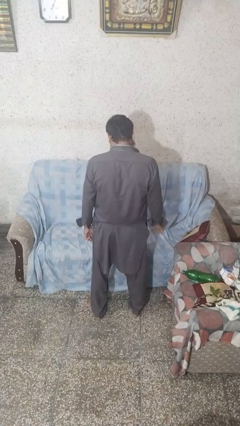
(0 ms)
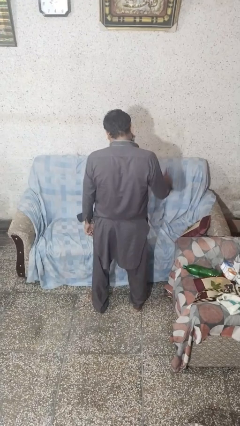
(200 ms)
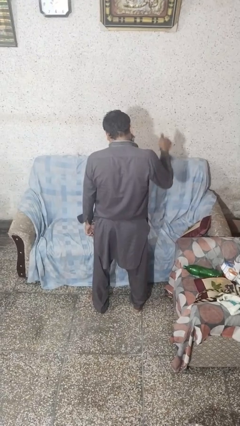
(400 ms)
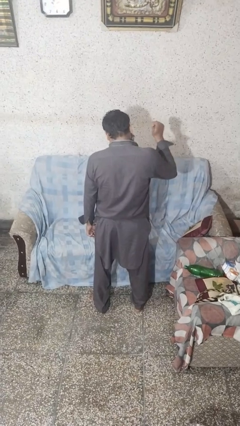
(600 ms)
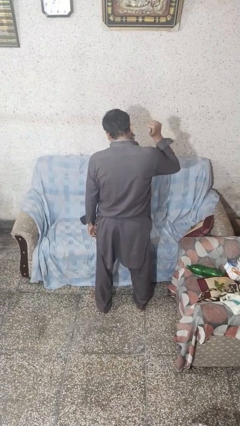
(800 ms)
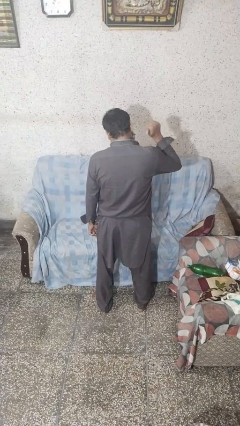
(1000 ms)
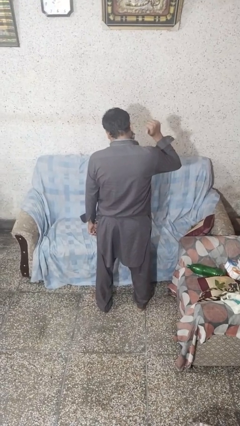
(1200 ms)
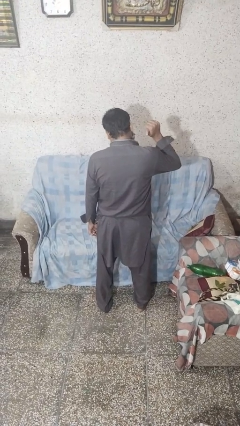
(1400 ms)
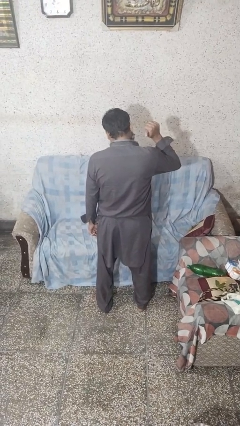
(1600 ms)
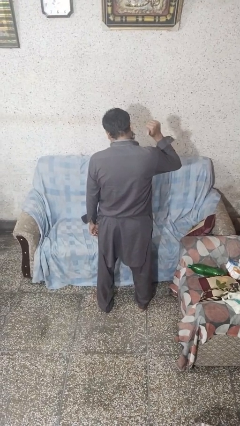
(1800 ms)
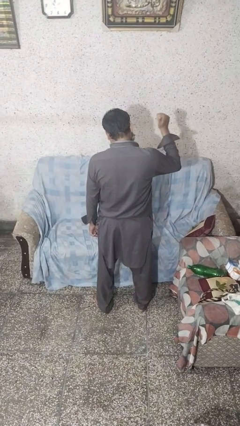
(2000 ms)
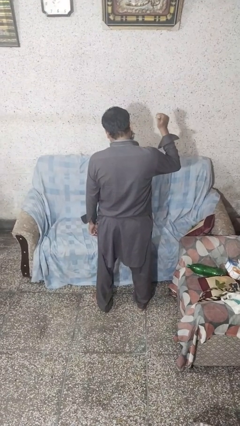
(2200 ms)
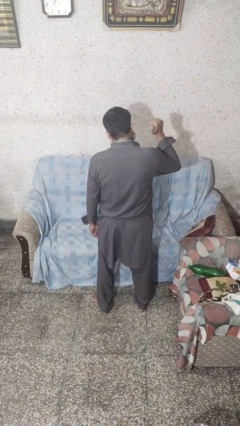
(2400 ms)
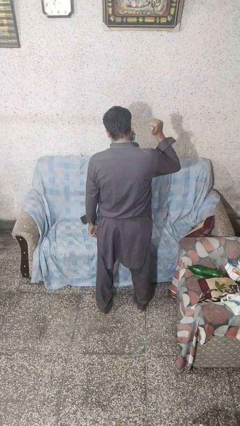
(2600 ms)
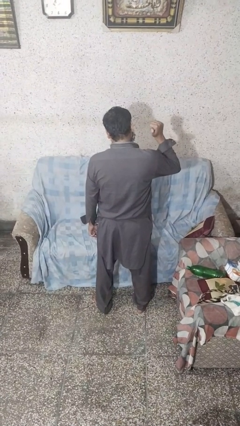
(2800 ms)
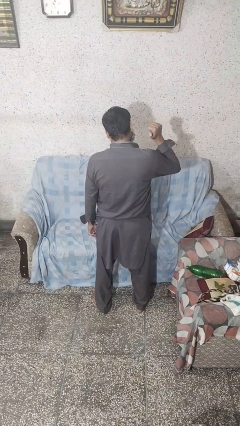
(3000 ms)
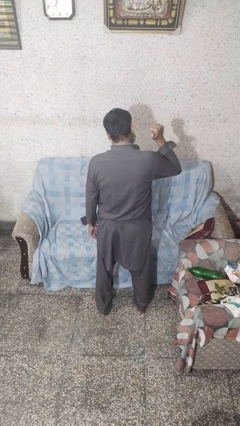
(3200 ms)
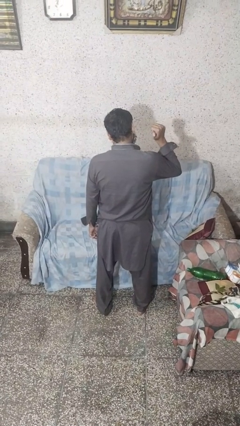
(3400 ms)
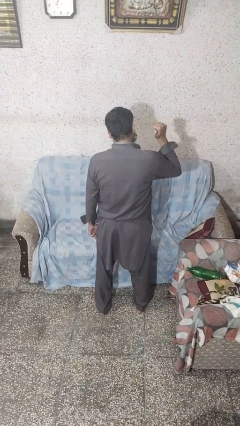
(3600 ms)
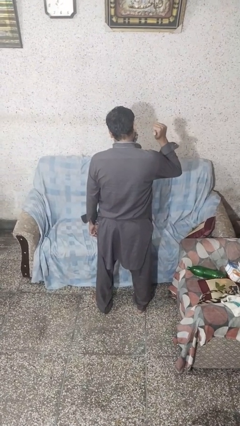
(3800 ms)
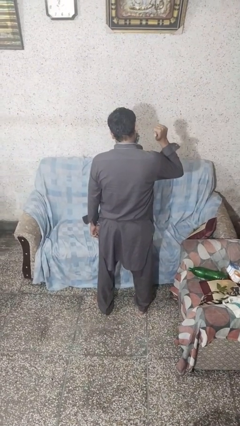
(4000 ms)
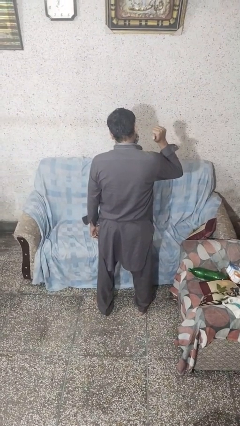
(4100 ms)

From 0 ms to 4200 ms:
person gestures behind me

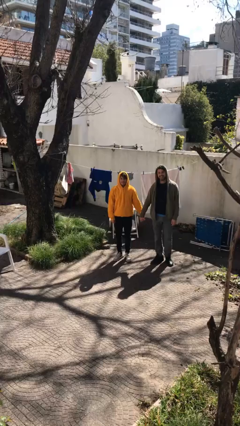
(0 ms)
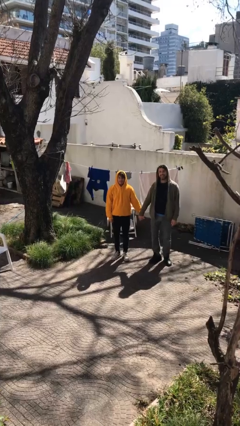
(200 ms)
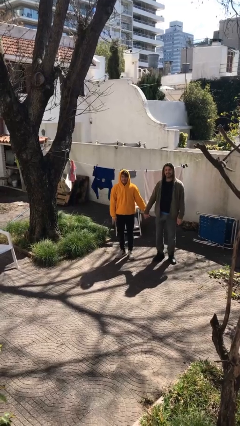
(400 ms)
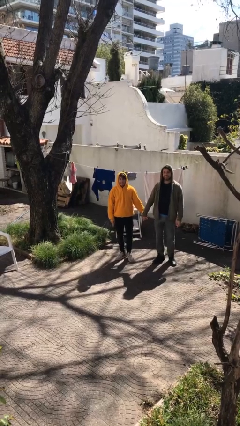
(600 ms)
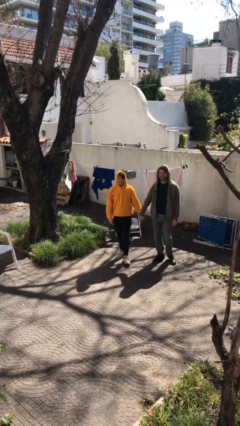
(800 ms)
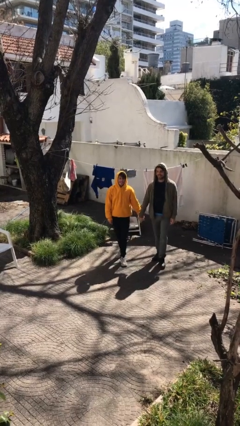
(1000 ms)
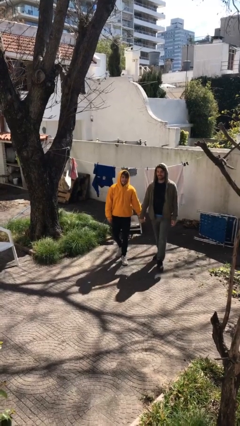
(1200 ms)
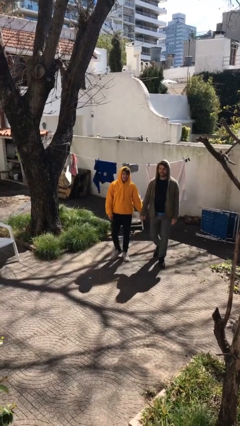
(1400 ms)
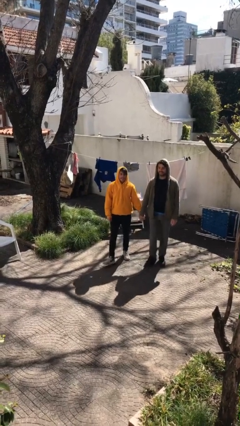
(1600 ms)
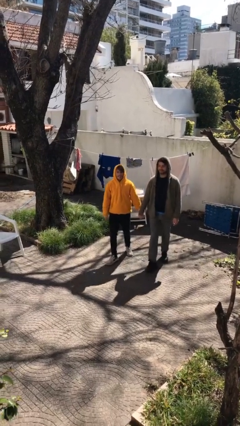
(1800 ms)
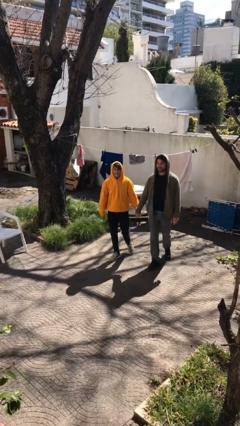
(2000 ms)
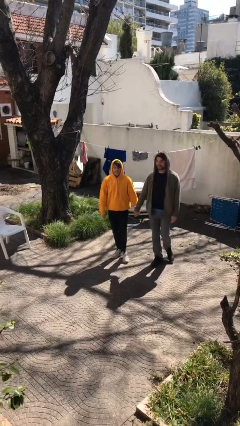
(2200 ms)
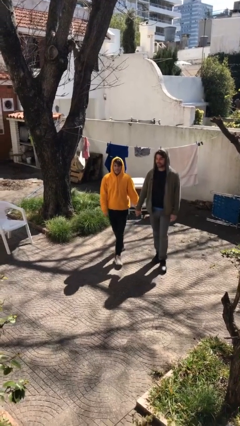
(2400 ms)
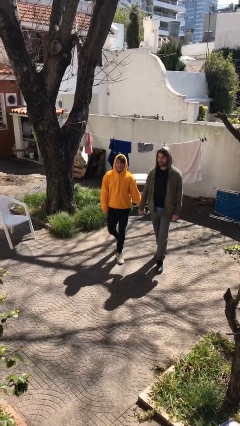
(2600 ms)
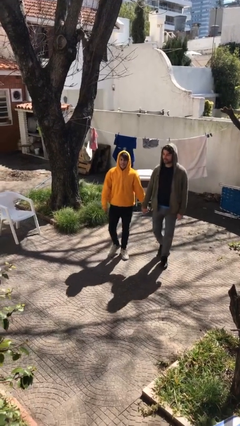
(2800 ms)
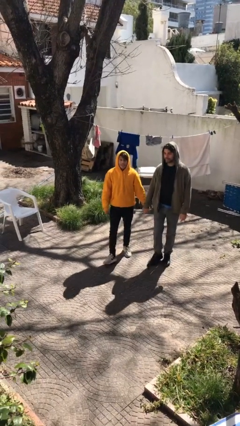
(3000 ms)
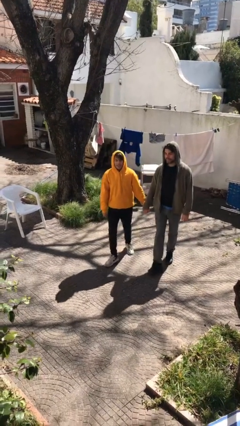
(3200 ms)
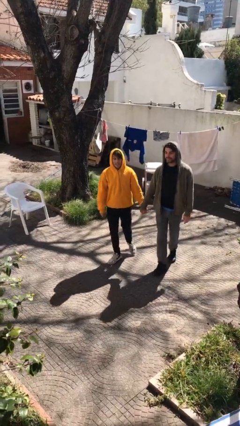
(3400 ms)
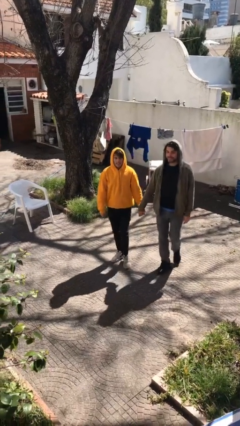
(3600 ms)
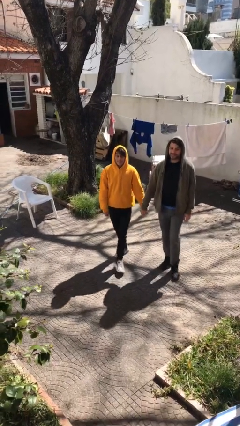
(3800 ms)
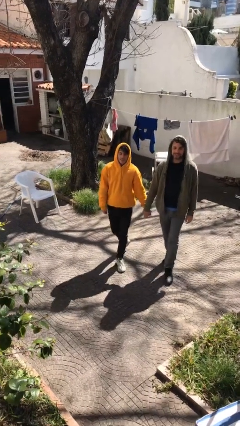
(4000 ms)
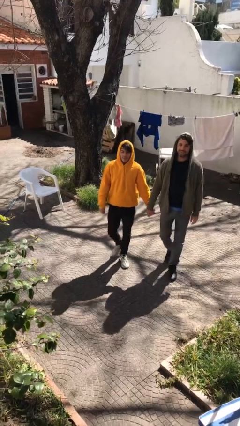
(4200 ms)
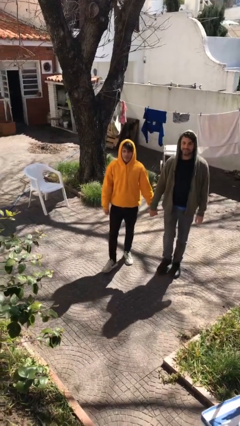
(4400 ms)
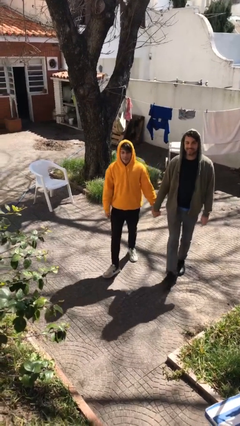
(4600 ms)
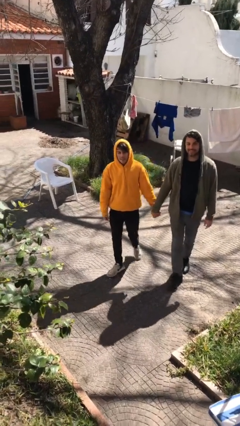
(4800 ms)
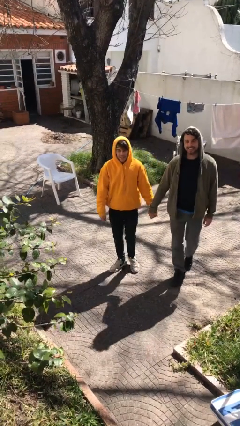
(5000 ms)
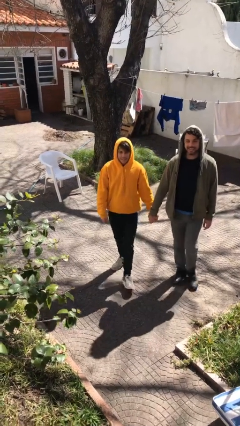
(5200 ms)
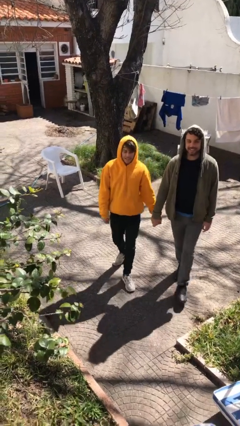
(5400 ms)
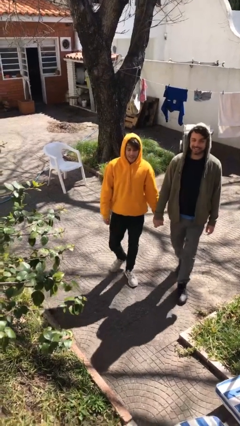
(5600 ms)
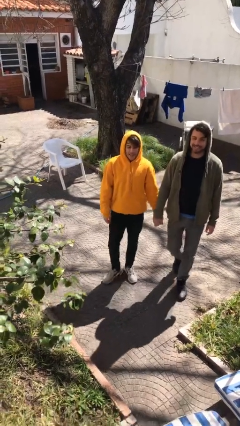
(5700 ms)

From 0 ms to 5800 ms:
person holds hand

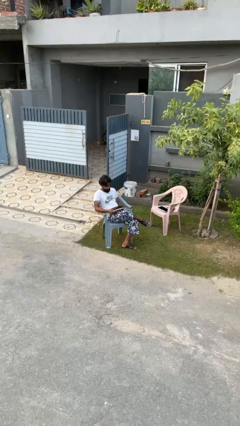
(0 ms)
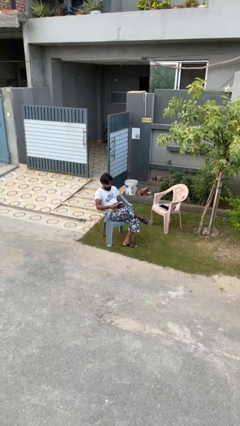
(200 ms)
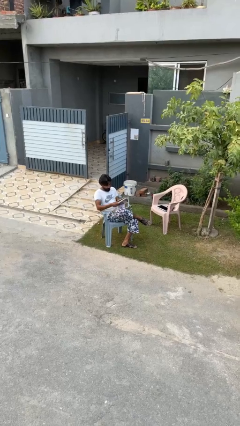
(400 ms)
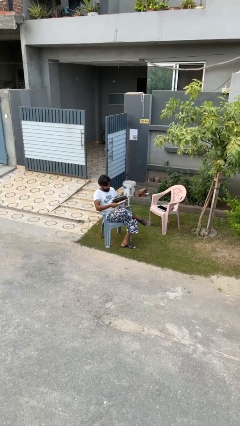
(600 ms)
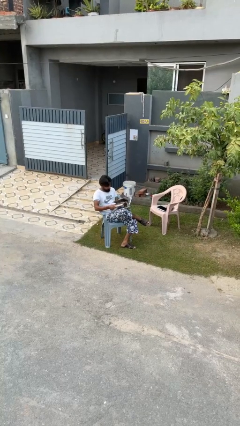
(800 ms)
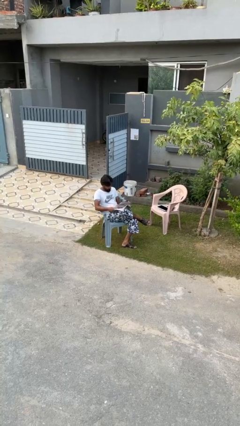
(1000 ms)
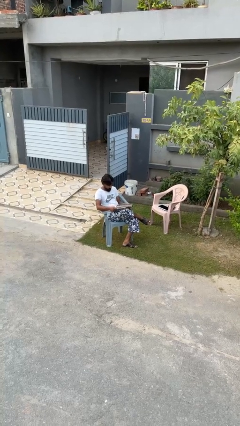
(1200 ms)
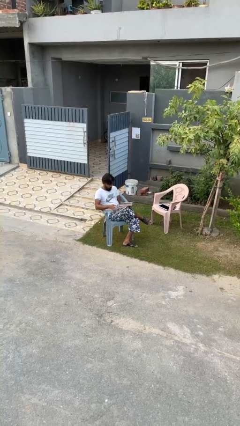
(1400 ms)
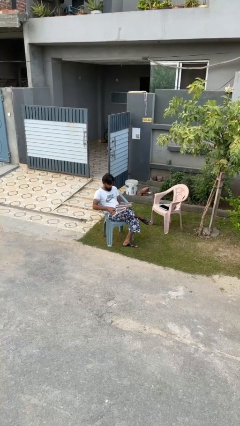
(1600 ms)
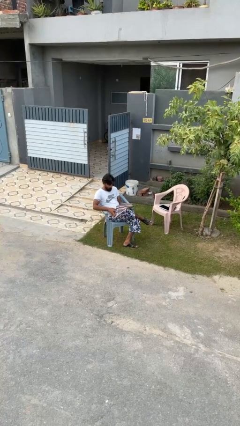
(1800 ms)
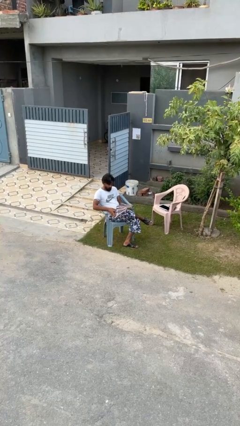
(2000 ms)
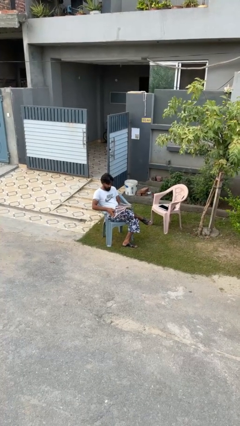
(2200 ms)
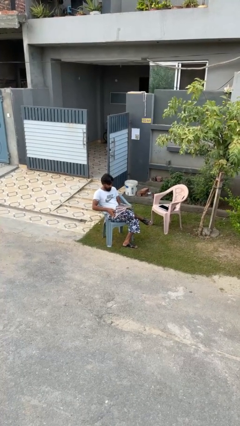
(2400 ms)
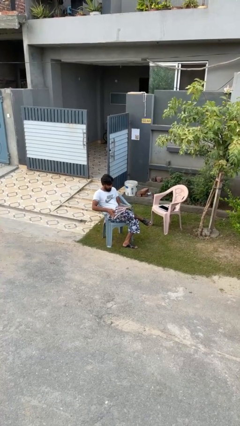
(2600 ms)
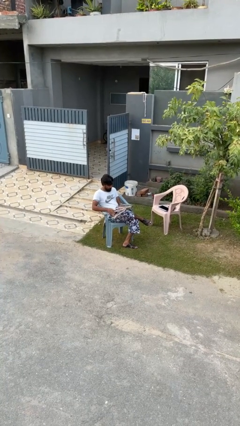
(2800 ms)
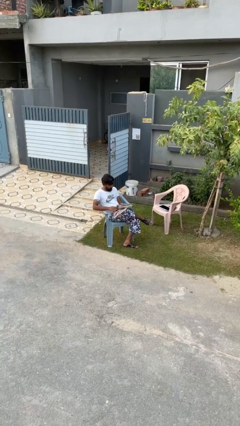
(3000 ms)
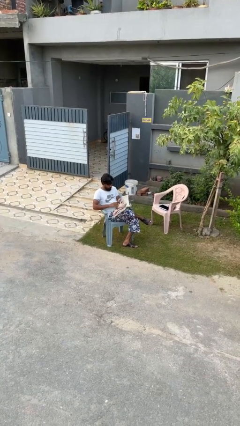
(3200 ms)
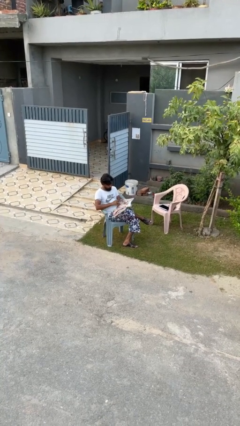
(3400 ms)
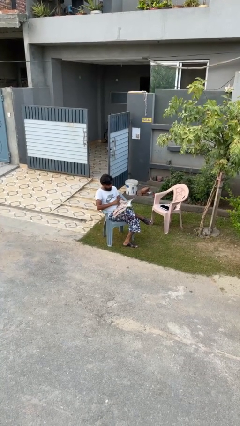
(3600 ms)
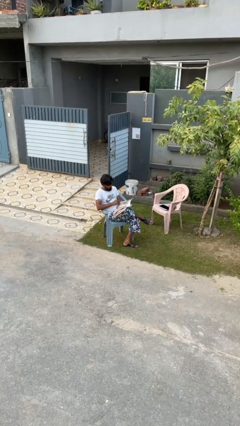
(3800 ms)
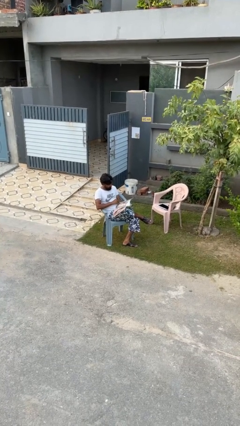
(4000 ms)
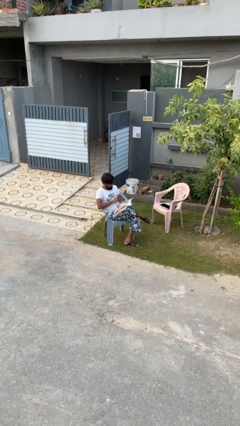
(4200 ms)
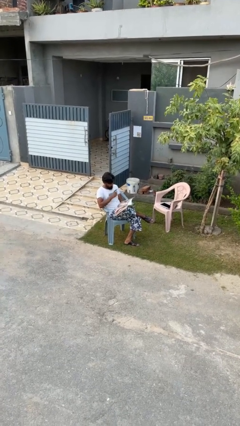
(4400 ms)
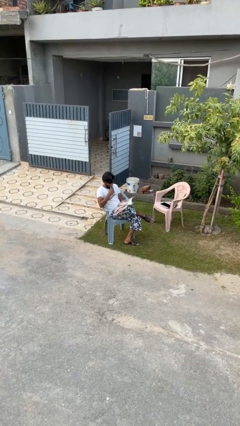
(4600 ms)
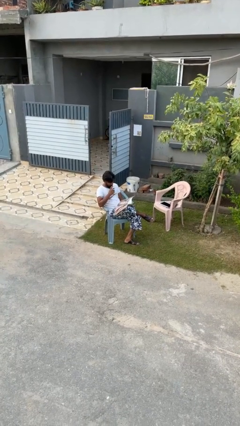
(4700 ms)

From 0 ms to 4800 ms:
person reads magazine

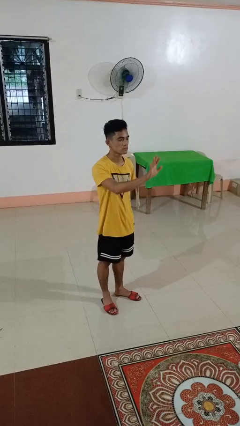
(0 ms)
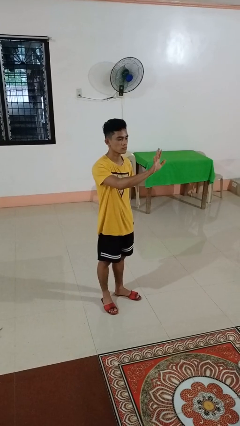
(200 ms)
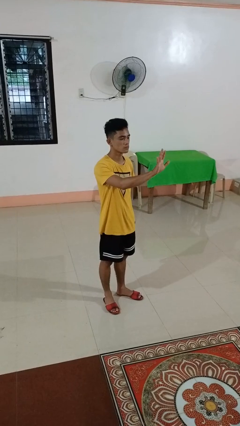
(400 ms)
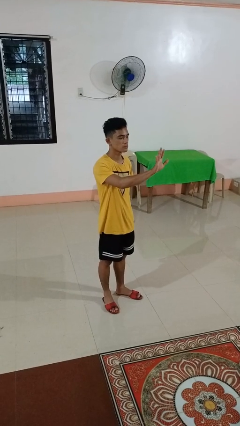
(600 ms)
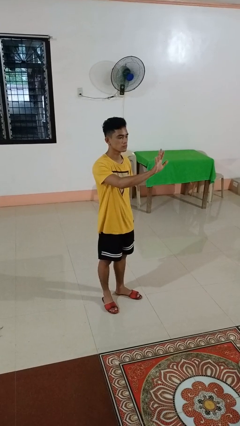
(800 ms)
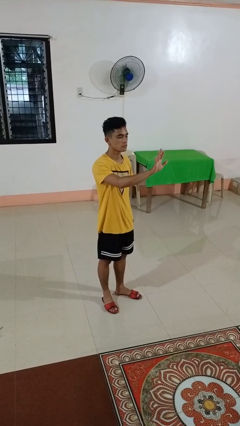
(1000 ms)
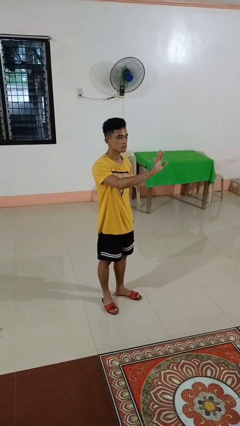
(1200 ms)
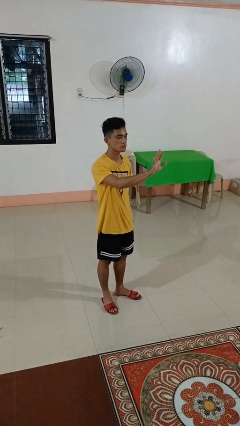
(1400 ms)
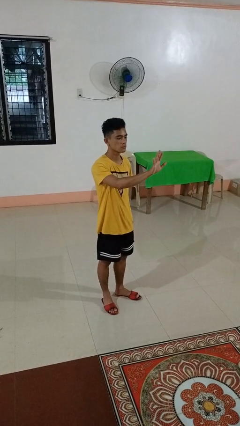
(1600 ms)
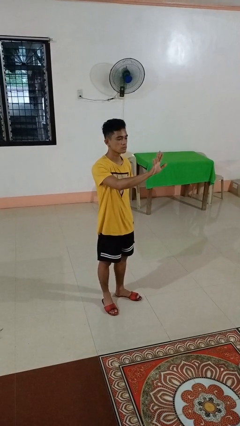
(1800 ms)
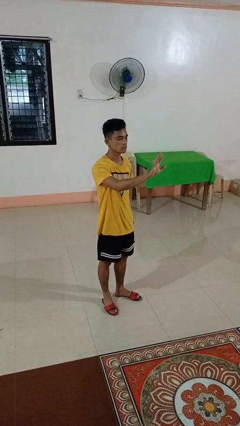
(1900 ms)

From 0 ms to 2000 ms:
person gestures number five

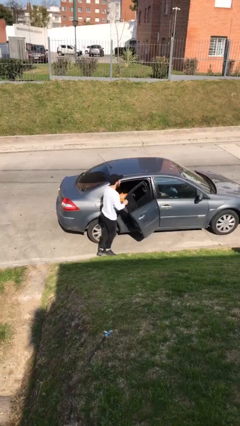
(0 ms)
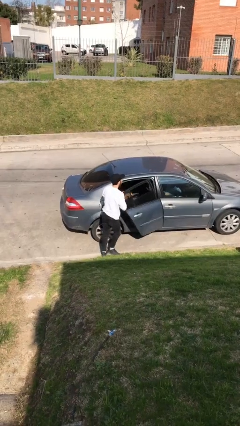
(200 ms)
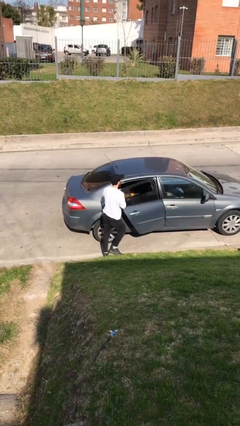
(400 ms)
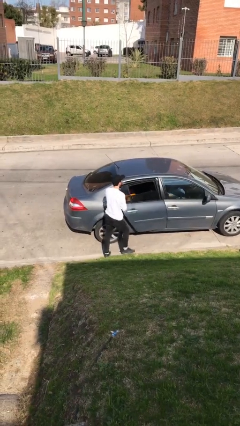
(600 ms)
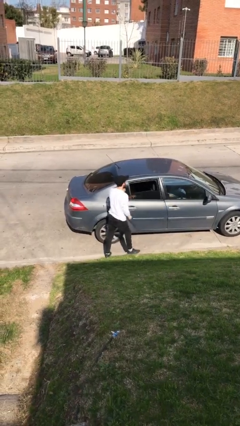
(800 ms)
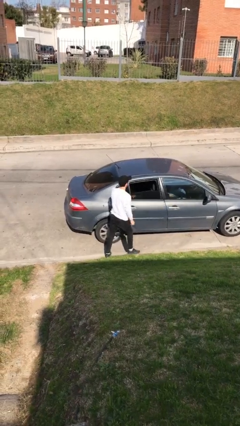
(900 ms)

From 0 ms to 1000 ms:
person closes car door
